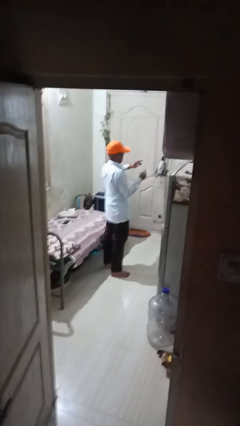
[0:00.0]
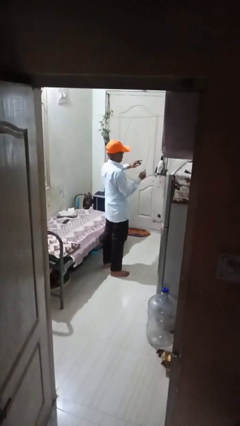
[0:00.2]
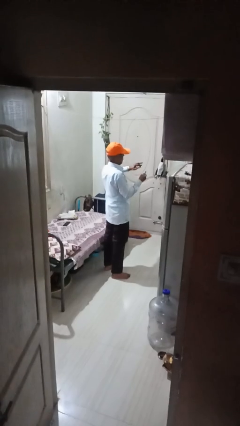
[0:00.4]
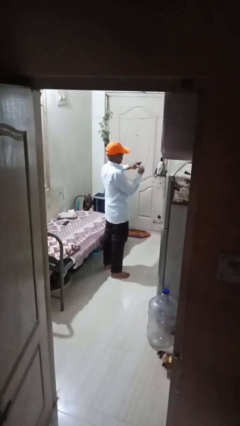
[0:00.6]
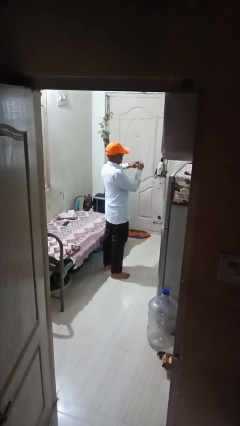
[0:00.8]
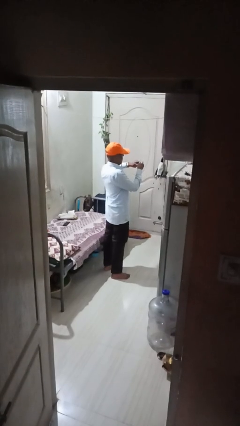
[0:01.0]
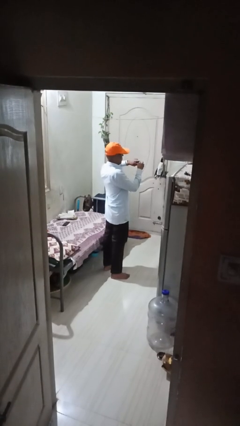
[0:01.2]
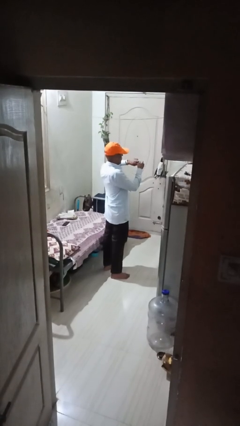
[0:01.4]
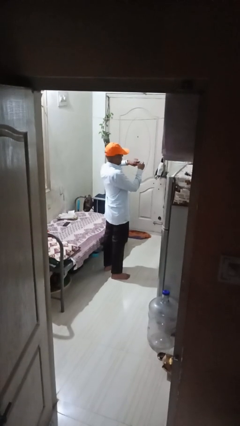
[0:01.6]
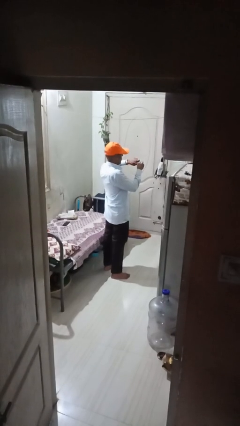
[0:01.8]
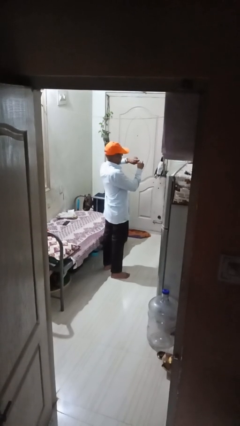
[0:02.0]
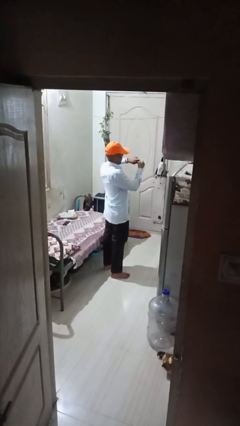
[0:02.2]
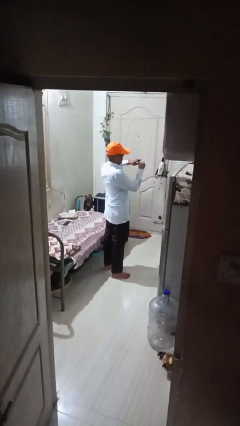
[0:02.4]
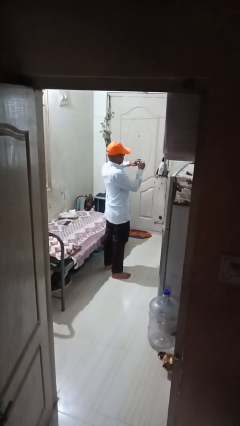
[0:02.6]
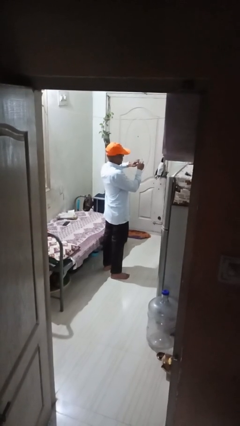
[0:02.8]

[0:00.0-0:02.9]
person files fingernails

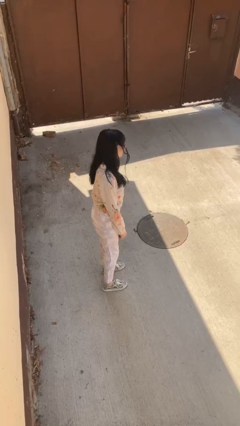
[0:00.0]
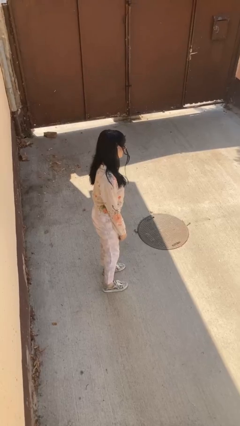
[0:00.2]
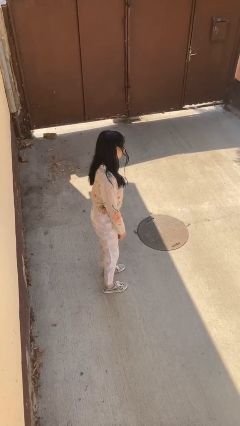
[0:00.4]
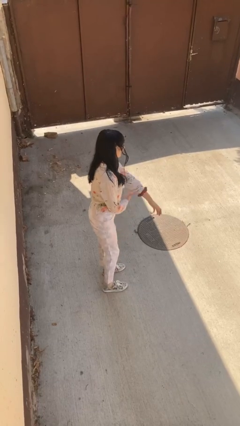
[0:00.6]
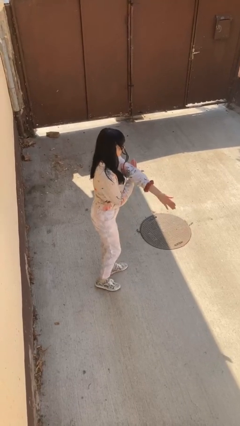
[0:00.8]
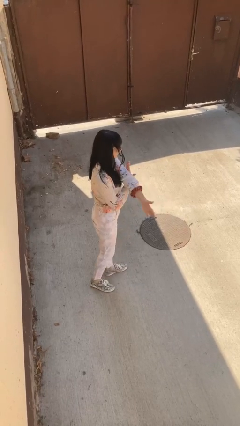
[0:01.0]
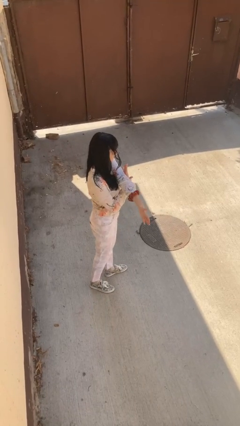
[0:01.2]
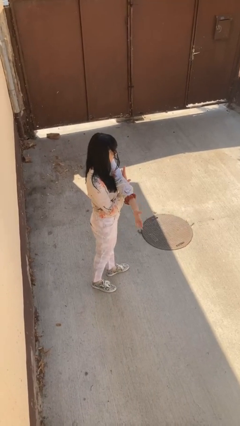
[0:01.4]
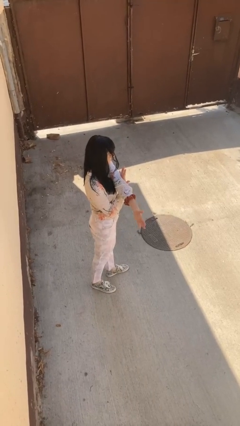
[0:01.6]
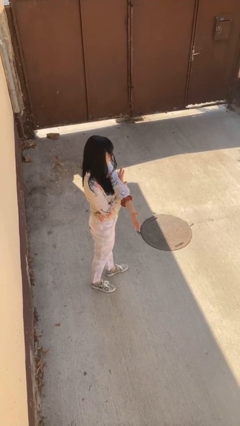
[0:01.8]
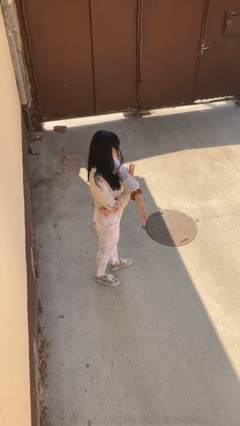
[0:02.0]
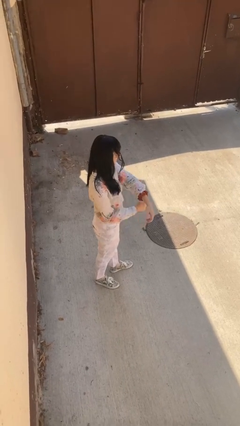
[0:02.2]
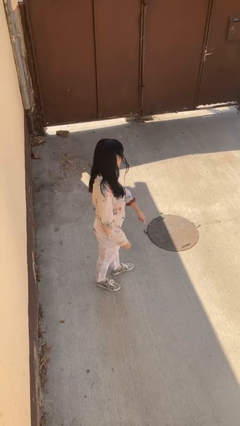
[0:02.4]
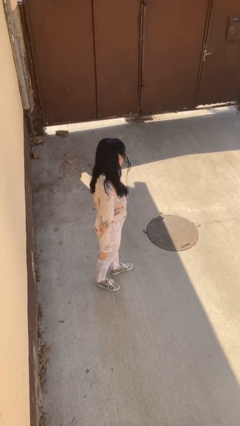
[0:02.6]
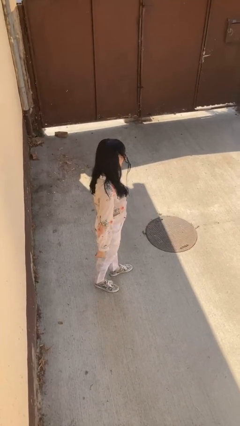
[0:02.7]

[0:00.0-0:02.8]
person stretches arms to side

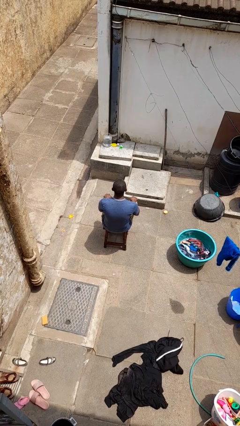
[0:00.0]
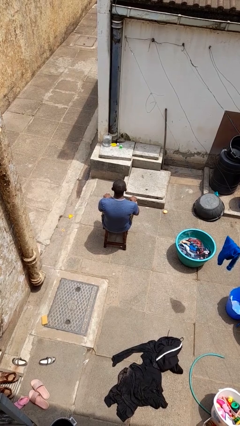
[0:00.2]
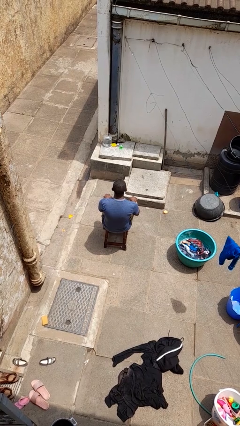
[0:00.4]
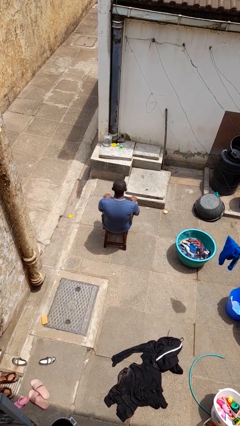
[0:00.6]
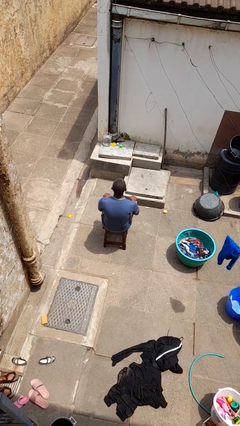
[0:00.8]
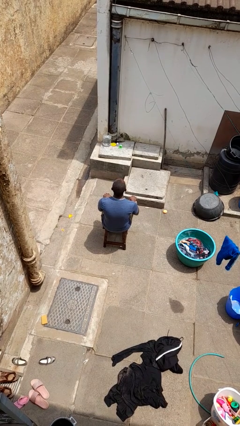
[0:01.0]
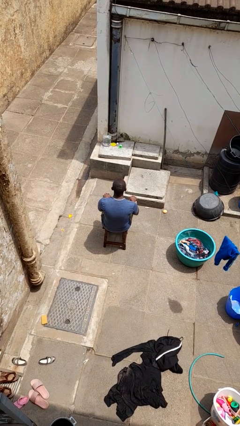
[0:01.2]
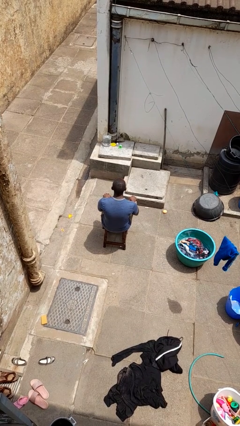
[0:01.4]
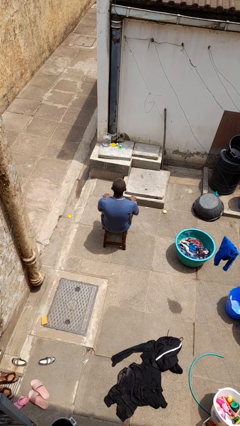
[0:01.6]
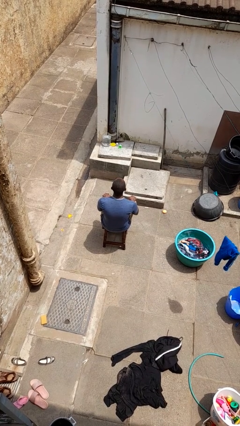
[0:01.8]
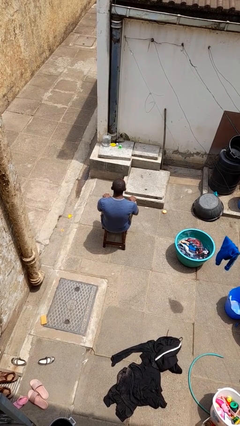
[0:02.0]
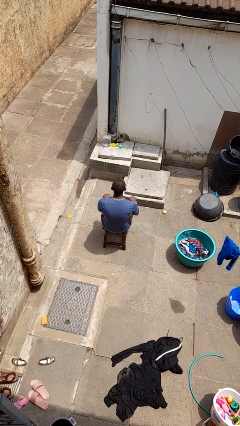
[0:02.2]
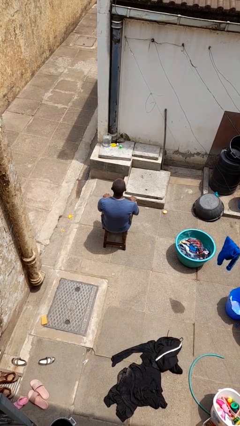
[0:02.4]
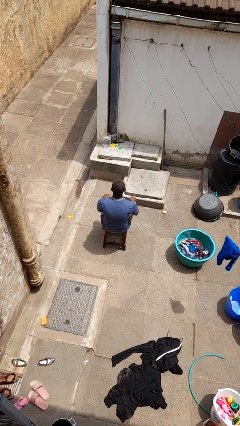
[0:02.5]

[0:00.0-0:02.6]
person nods head

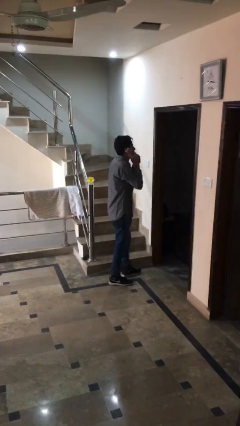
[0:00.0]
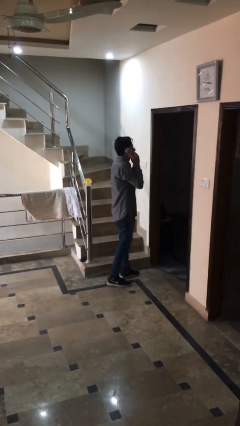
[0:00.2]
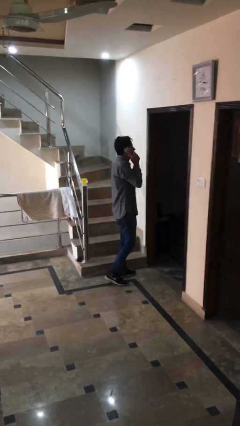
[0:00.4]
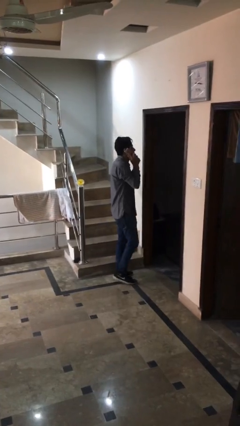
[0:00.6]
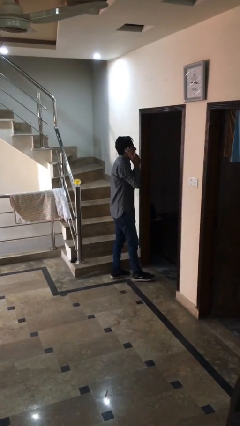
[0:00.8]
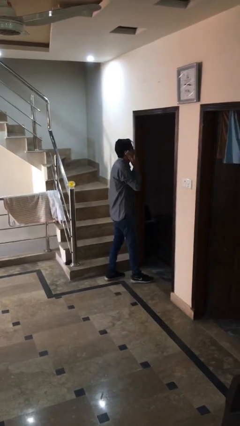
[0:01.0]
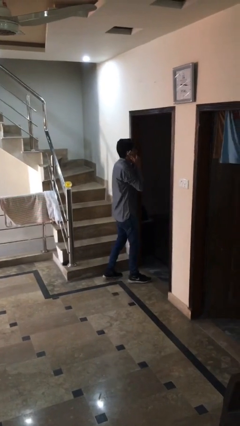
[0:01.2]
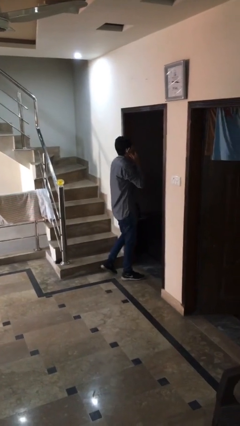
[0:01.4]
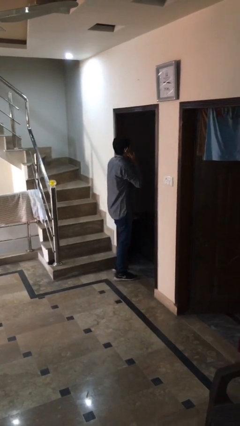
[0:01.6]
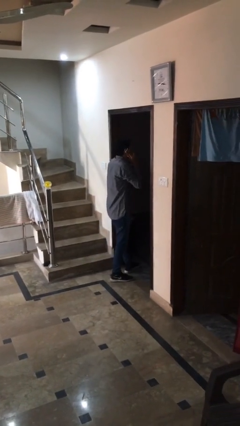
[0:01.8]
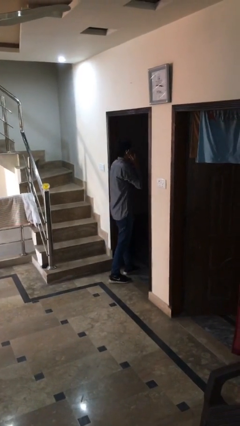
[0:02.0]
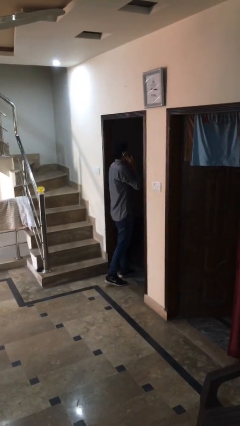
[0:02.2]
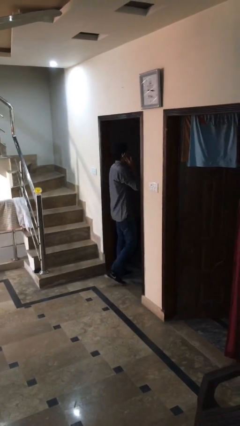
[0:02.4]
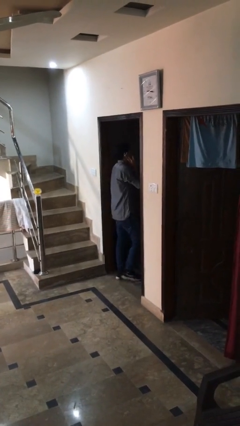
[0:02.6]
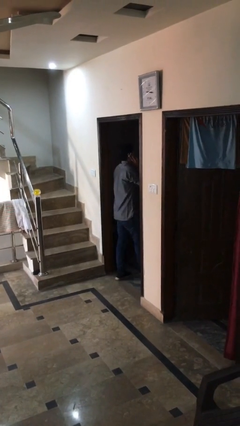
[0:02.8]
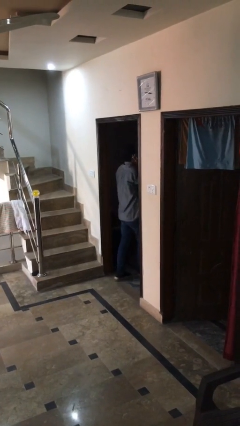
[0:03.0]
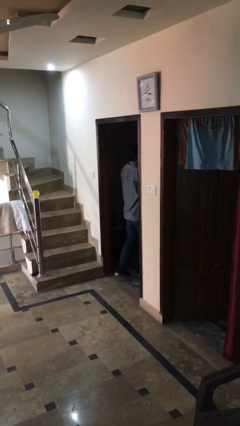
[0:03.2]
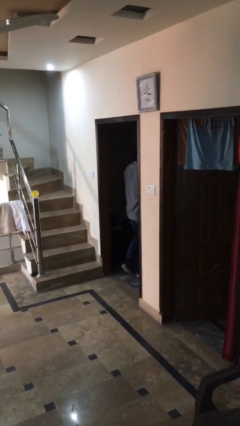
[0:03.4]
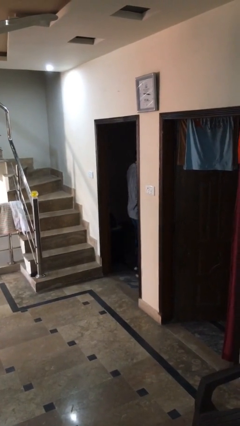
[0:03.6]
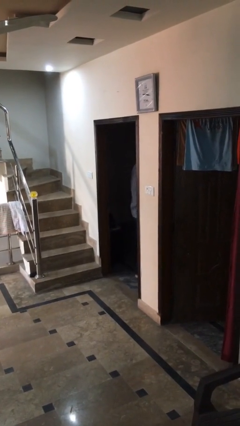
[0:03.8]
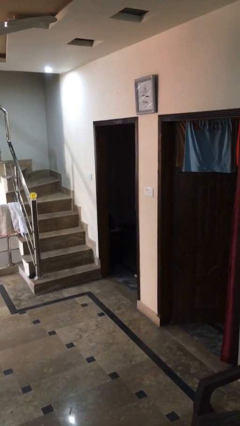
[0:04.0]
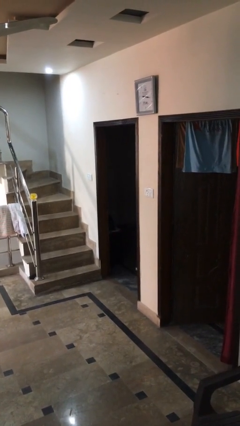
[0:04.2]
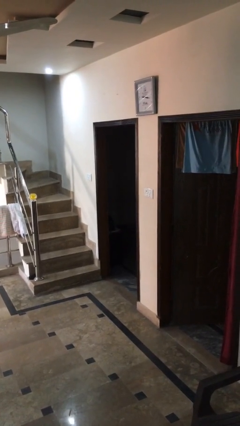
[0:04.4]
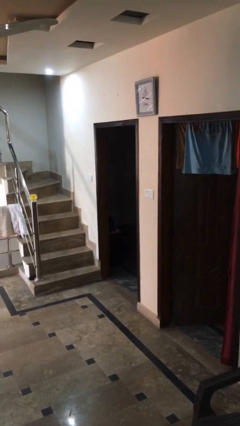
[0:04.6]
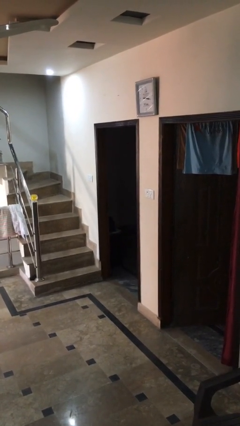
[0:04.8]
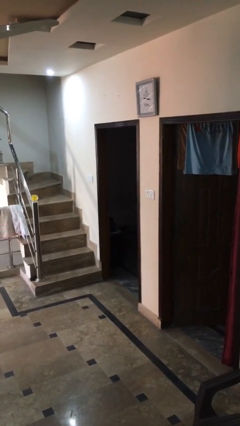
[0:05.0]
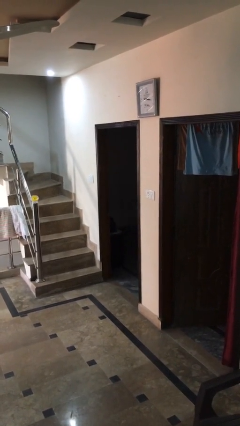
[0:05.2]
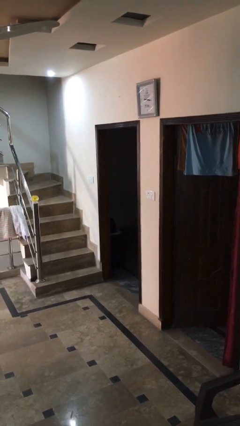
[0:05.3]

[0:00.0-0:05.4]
person exits scene through structure

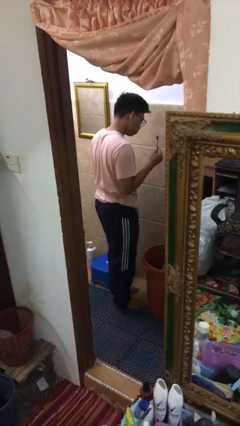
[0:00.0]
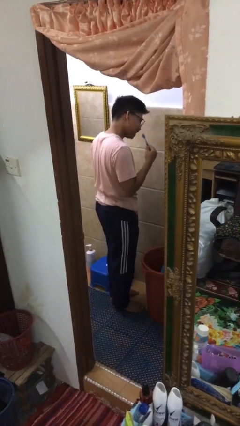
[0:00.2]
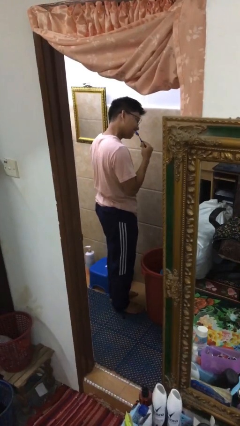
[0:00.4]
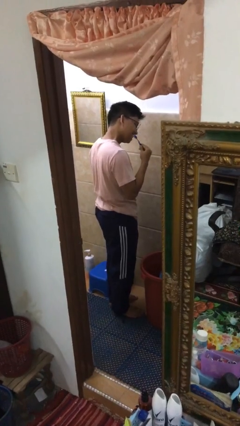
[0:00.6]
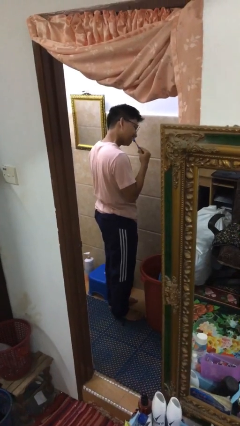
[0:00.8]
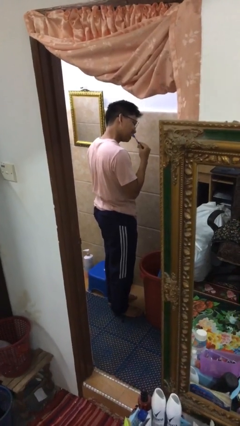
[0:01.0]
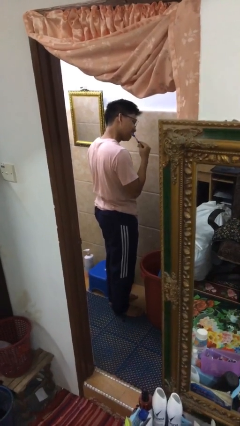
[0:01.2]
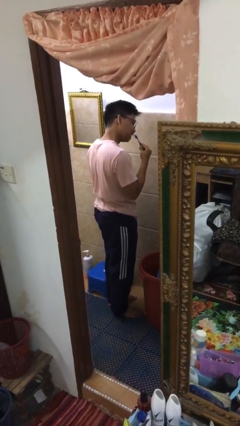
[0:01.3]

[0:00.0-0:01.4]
person brushes teeth

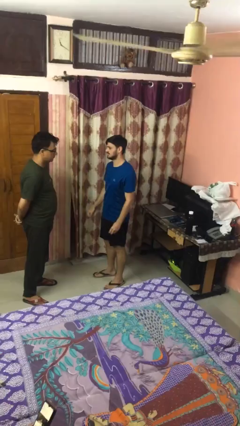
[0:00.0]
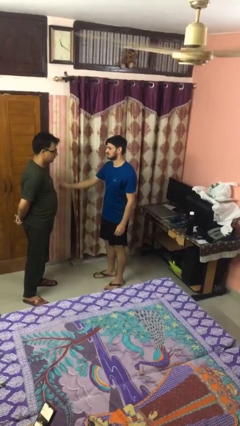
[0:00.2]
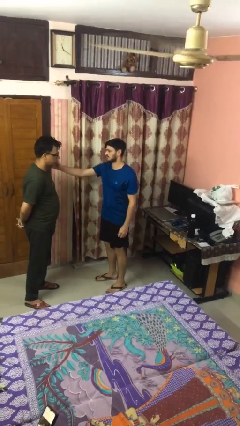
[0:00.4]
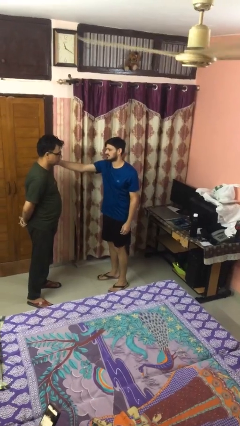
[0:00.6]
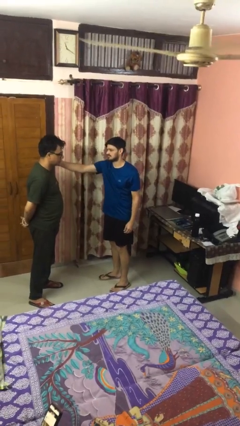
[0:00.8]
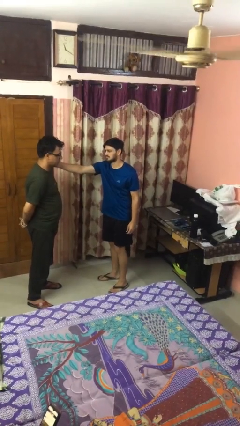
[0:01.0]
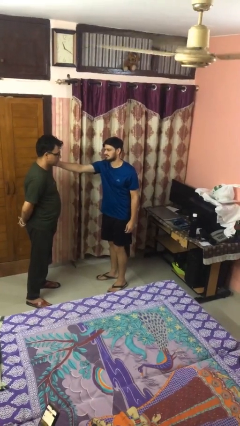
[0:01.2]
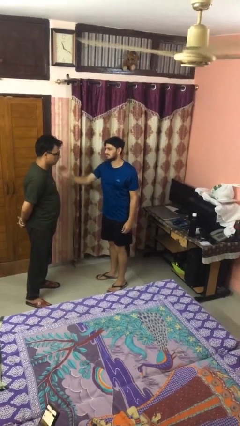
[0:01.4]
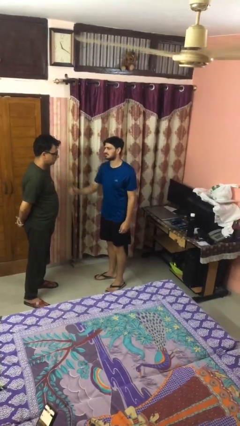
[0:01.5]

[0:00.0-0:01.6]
person touches face of person

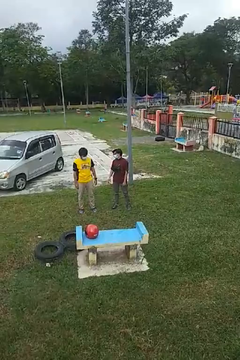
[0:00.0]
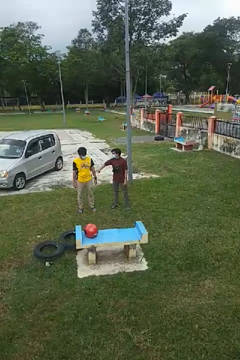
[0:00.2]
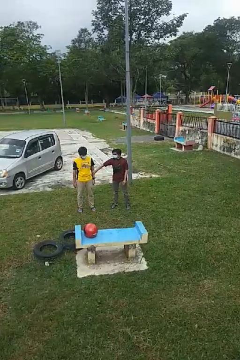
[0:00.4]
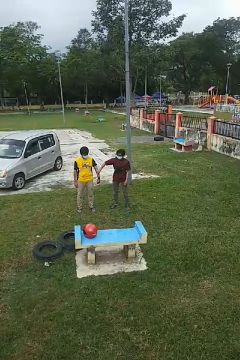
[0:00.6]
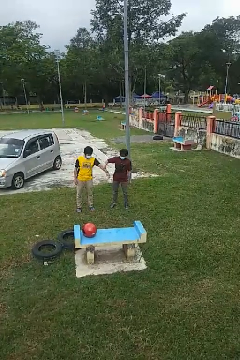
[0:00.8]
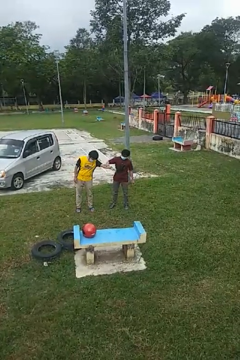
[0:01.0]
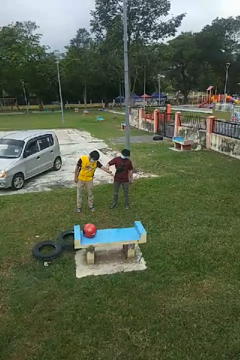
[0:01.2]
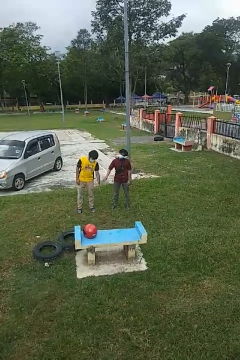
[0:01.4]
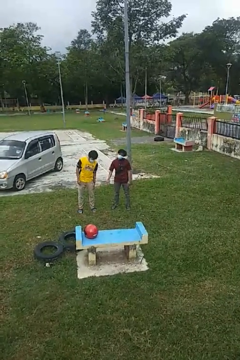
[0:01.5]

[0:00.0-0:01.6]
person grabs person by forearm
